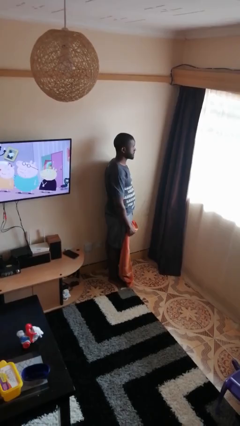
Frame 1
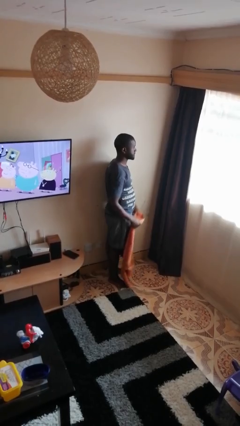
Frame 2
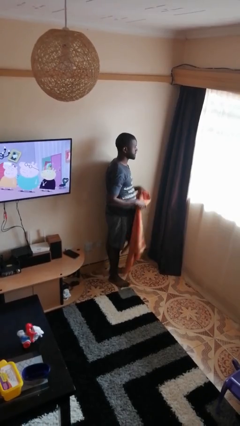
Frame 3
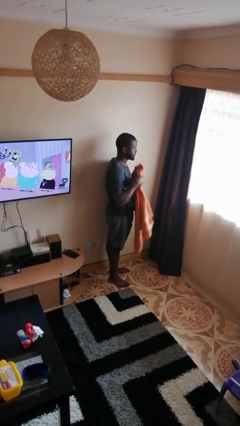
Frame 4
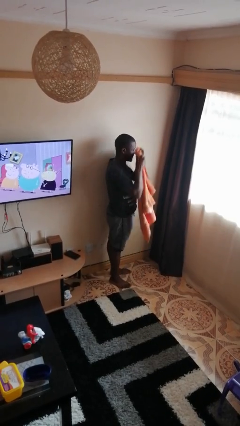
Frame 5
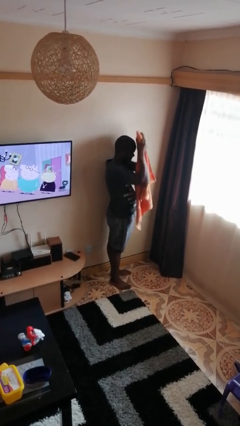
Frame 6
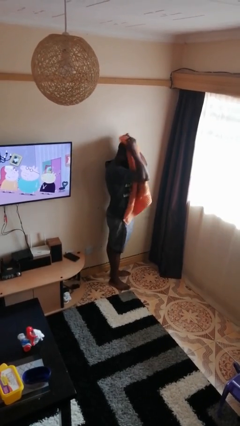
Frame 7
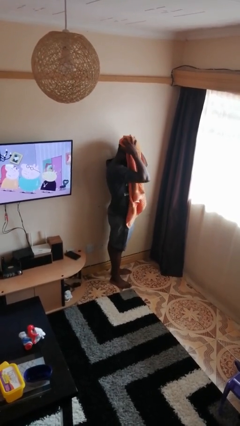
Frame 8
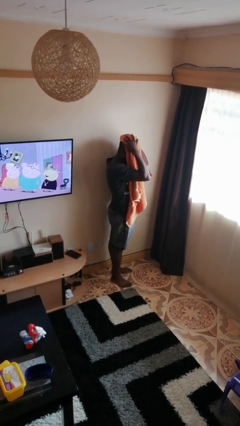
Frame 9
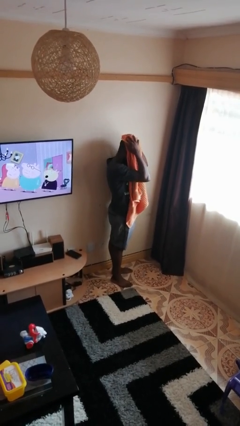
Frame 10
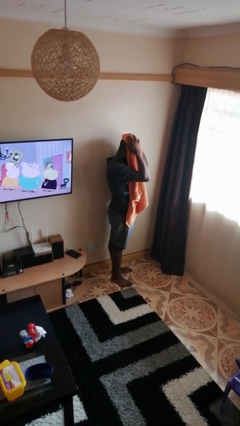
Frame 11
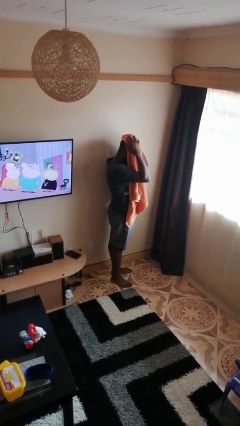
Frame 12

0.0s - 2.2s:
person dries hair with towel

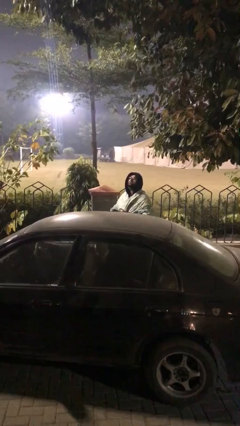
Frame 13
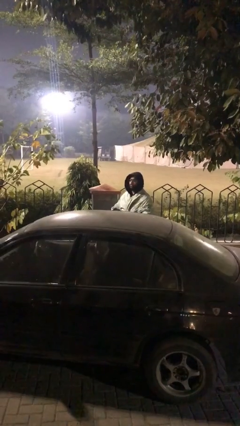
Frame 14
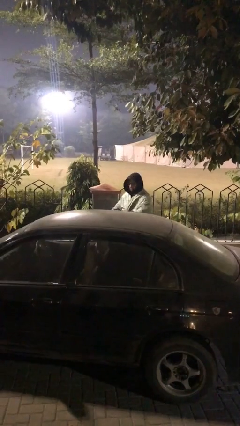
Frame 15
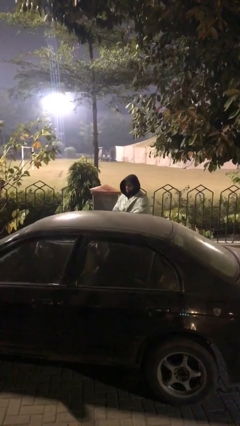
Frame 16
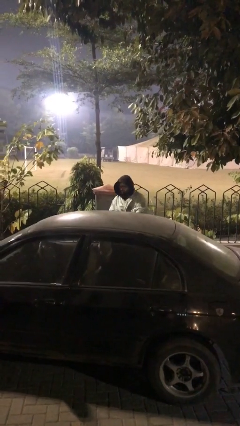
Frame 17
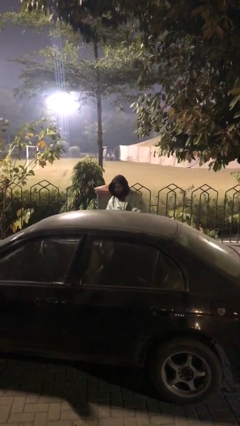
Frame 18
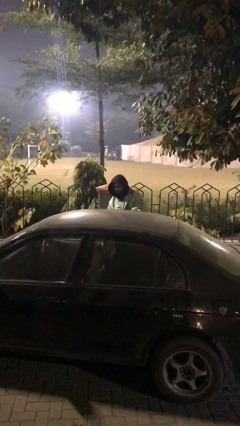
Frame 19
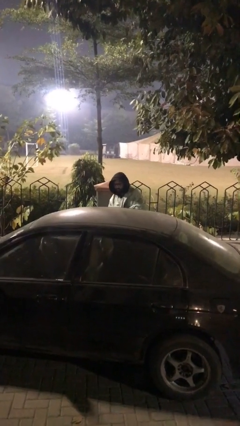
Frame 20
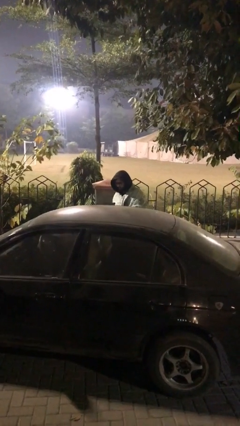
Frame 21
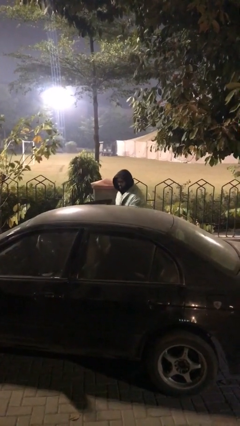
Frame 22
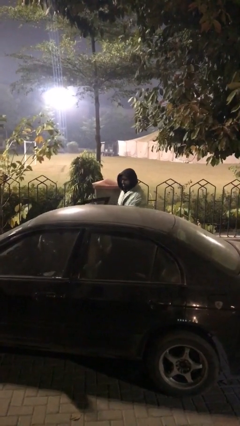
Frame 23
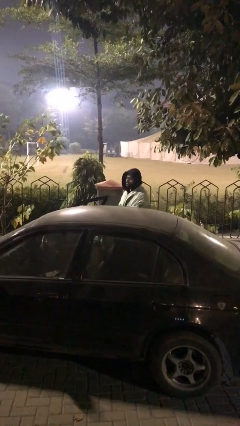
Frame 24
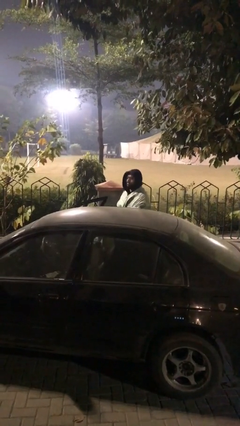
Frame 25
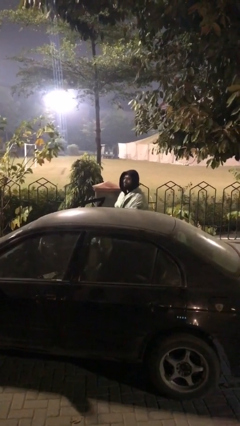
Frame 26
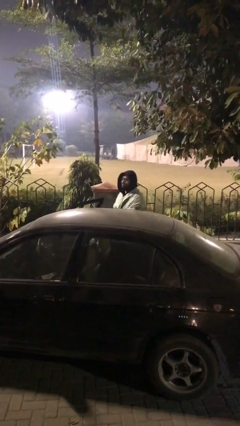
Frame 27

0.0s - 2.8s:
person opens car door

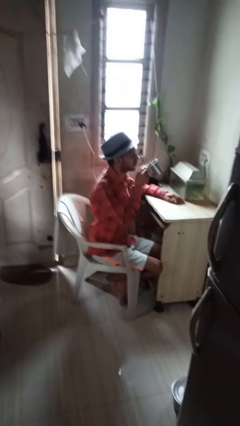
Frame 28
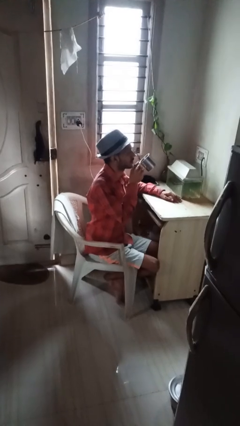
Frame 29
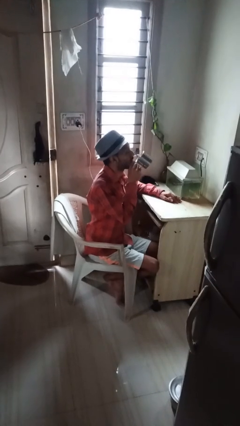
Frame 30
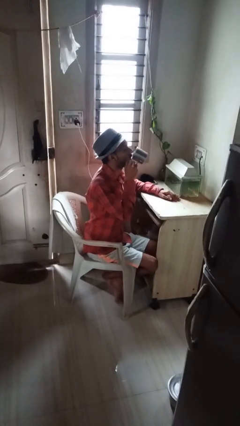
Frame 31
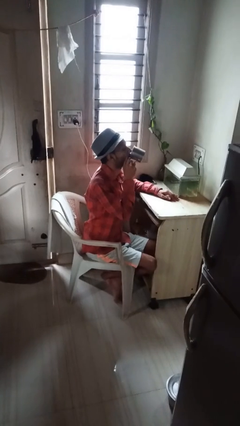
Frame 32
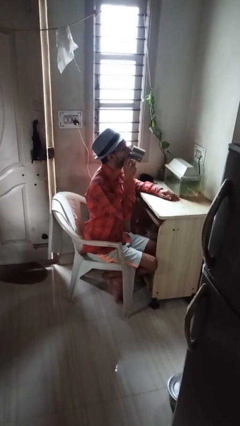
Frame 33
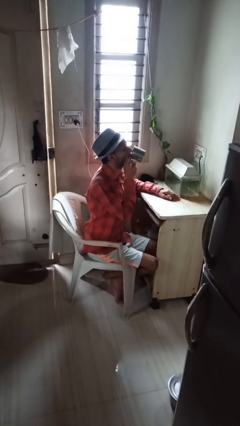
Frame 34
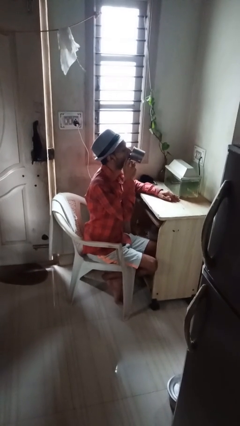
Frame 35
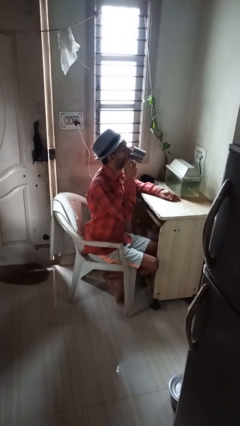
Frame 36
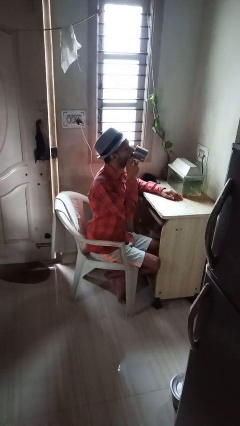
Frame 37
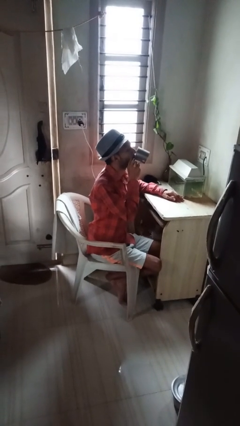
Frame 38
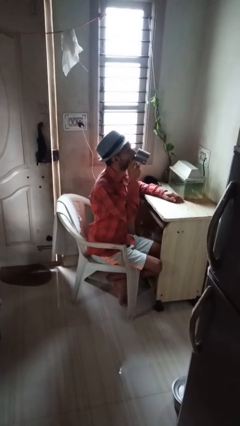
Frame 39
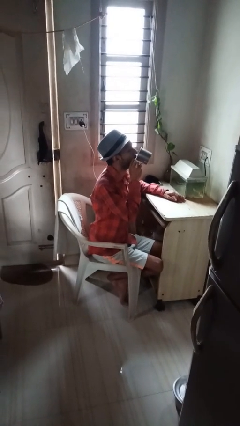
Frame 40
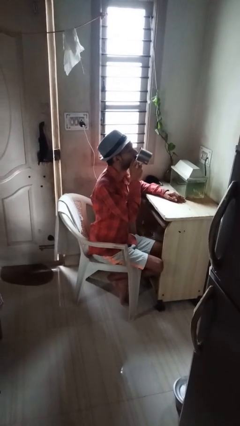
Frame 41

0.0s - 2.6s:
person drinks from mug

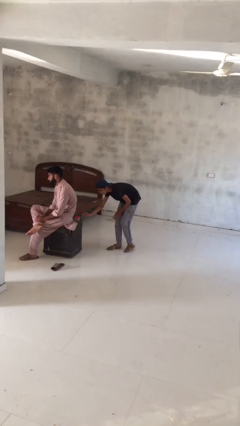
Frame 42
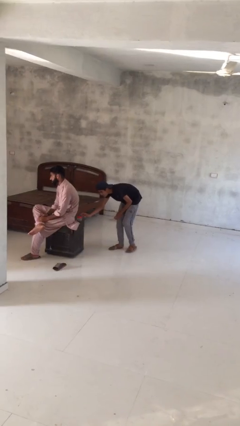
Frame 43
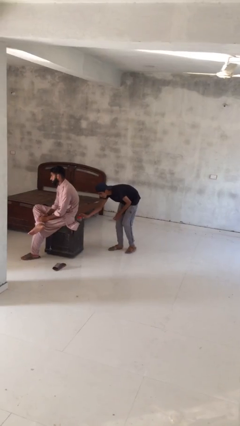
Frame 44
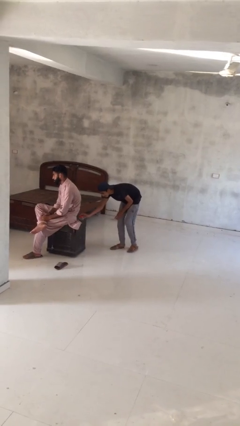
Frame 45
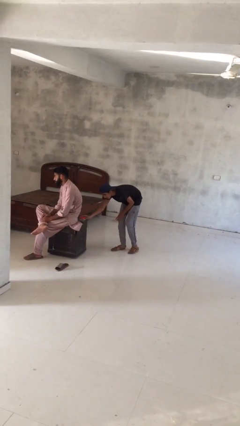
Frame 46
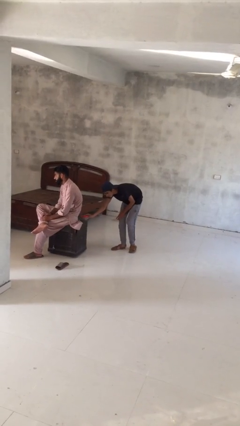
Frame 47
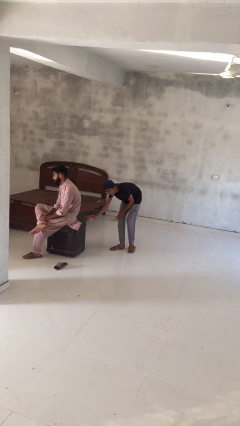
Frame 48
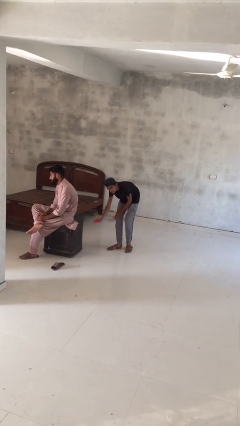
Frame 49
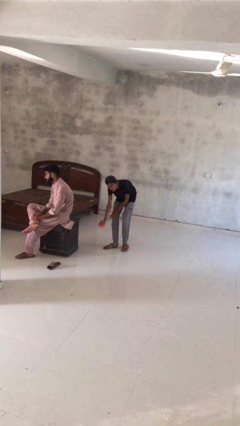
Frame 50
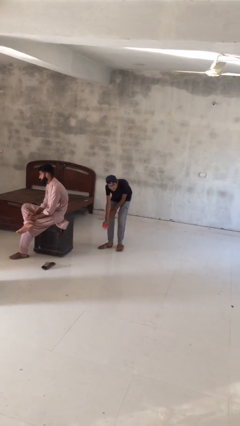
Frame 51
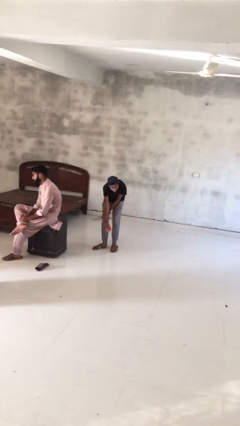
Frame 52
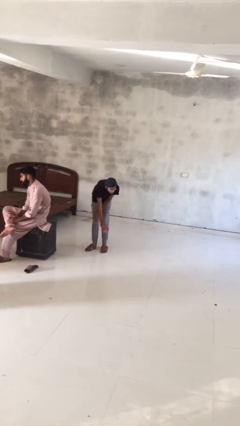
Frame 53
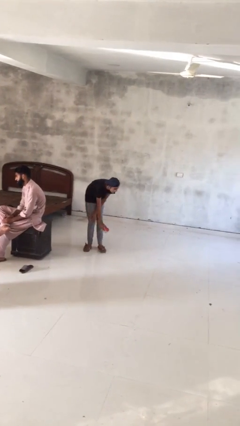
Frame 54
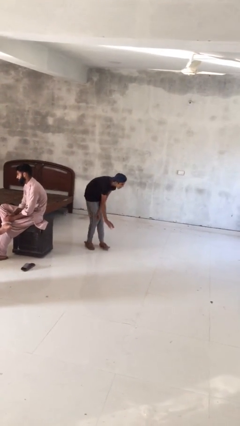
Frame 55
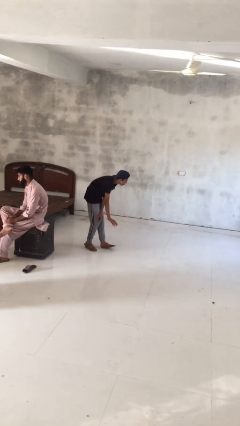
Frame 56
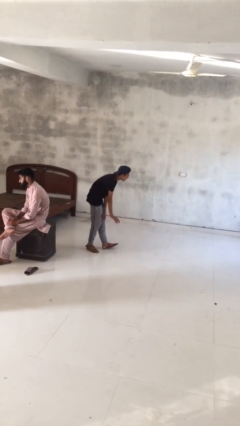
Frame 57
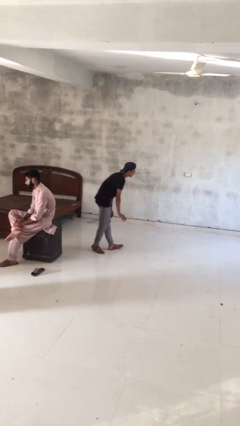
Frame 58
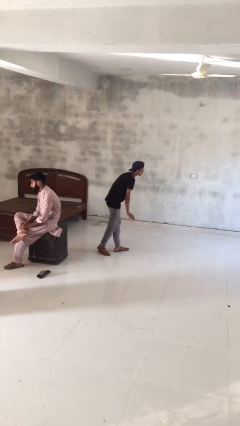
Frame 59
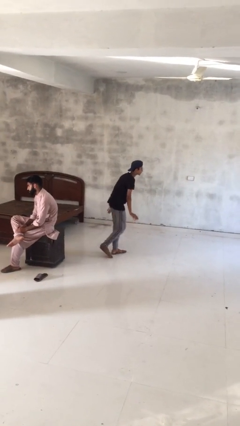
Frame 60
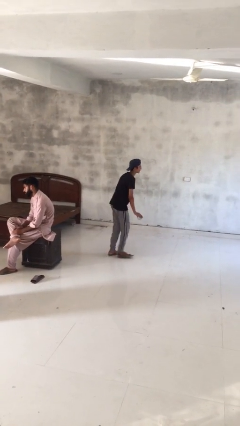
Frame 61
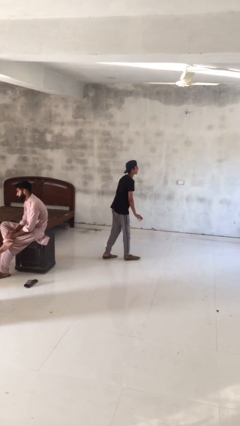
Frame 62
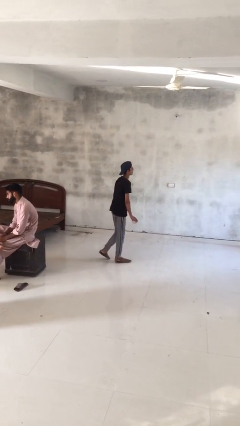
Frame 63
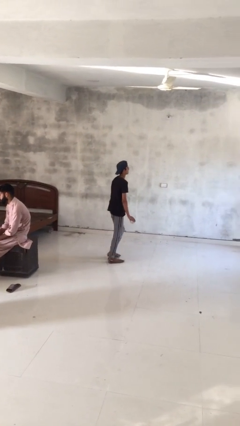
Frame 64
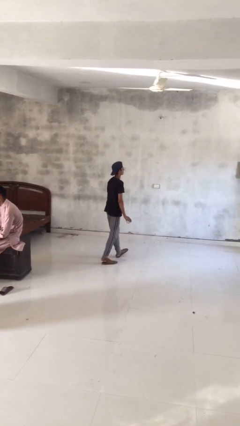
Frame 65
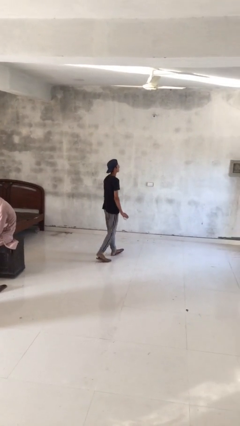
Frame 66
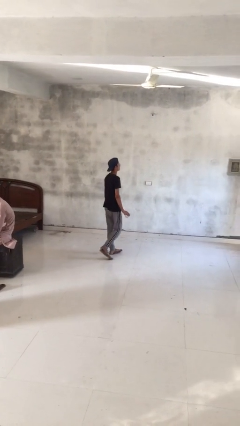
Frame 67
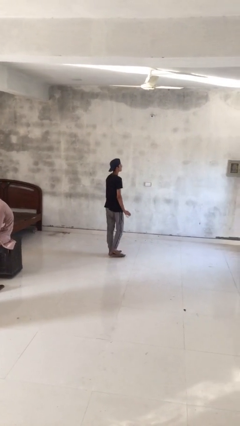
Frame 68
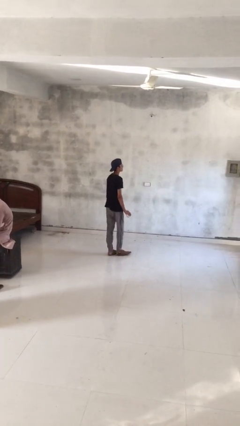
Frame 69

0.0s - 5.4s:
person steals object from person

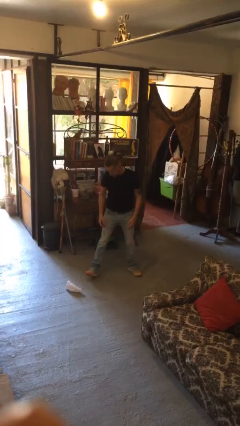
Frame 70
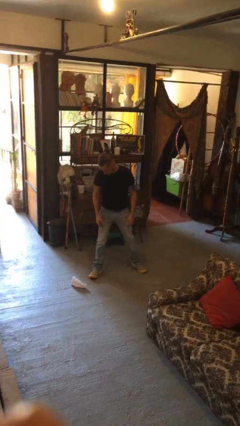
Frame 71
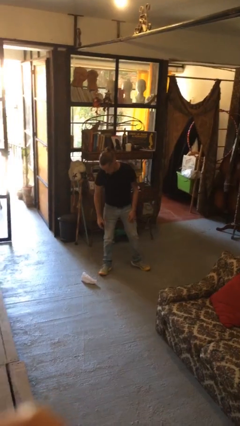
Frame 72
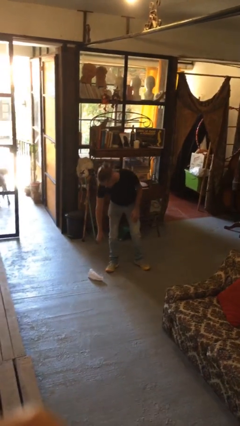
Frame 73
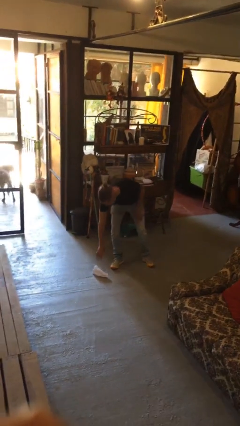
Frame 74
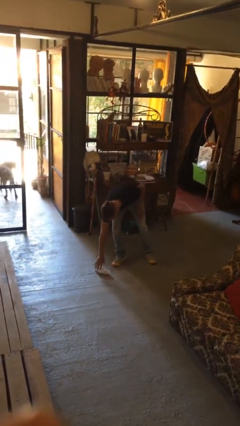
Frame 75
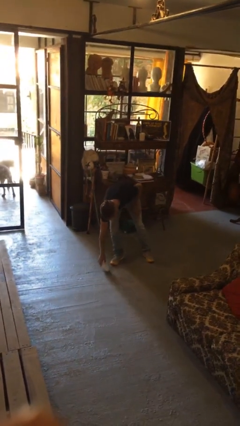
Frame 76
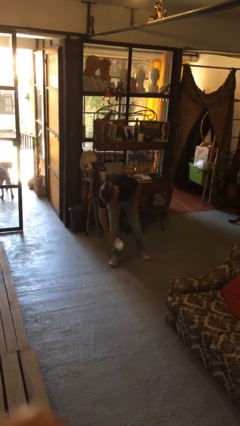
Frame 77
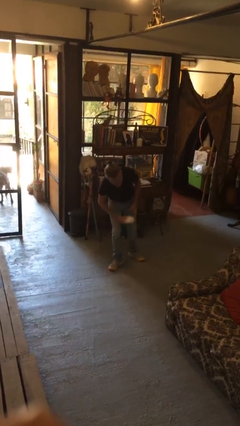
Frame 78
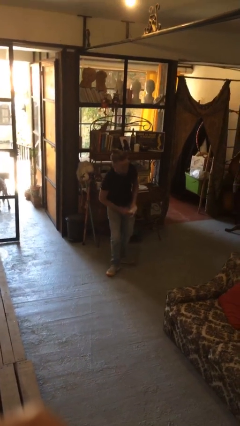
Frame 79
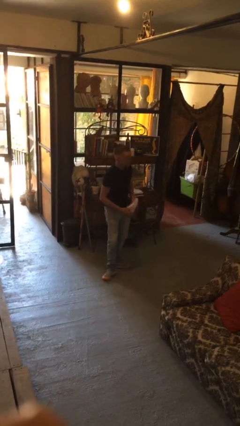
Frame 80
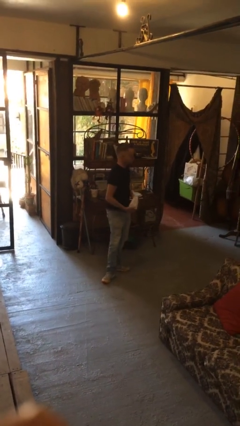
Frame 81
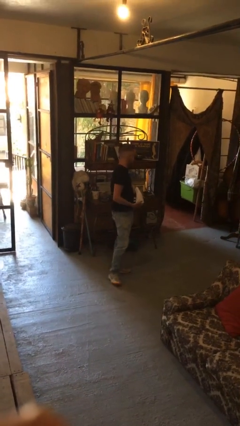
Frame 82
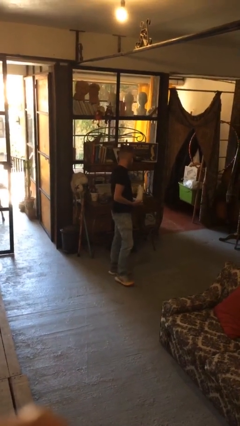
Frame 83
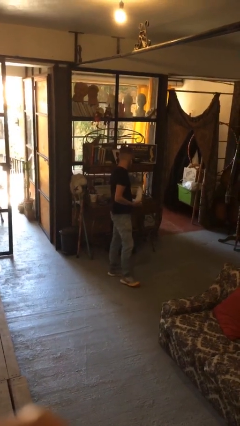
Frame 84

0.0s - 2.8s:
person picks up object from floor

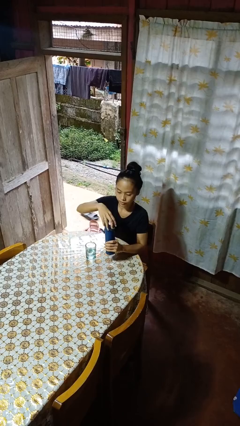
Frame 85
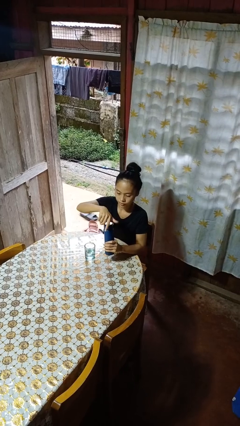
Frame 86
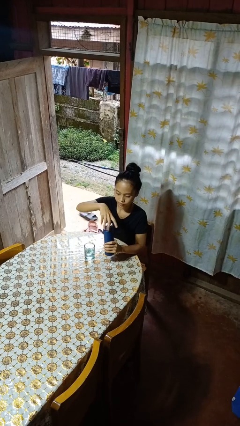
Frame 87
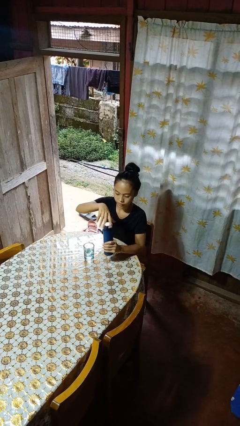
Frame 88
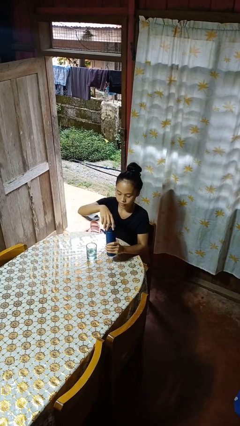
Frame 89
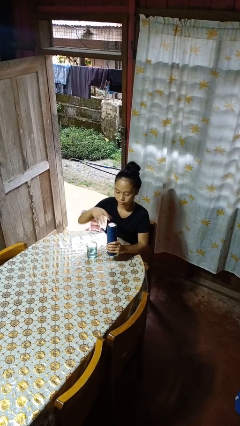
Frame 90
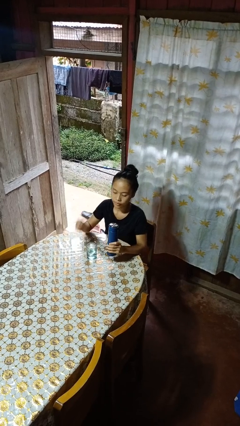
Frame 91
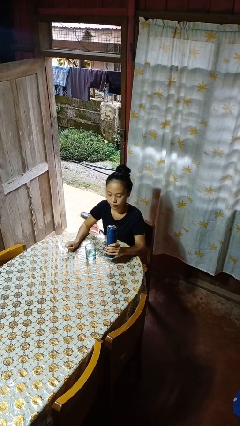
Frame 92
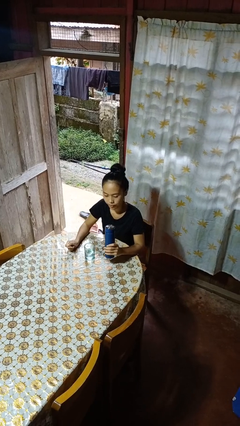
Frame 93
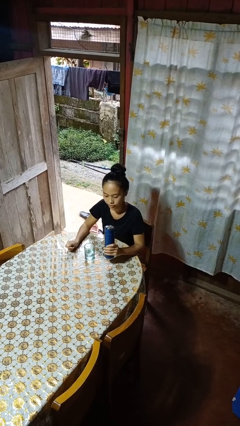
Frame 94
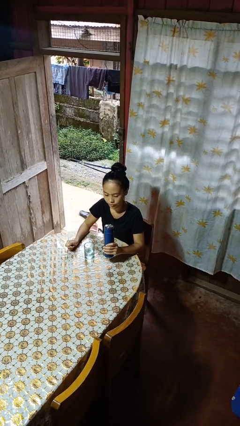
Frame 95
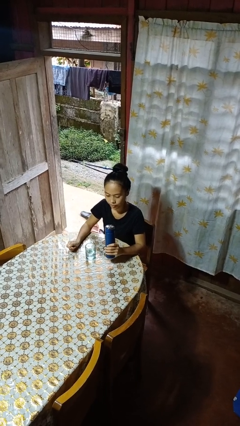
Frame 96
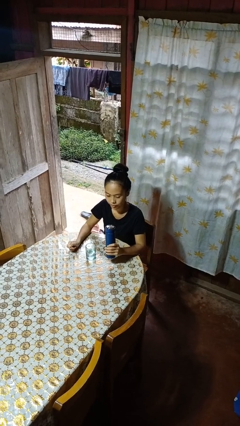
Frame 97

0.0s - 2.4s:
person screws lid to bottle
